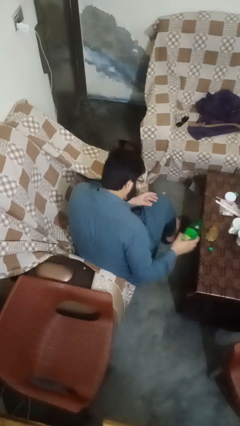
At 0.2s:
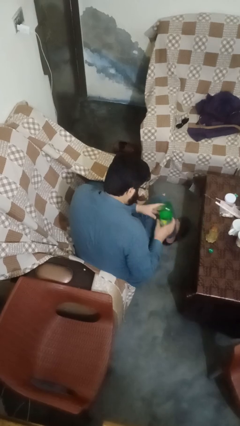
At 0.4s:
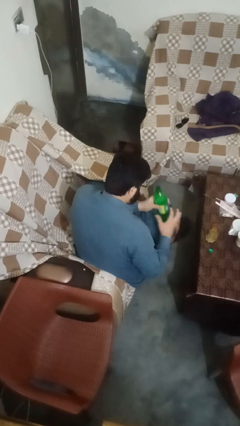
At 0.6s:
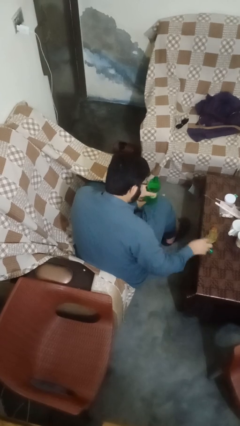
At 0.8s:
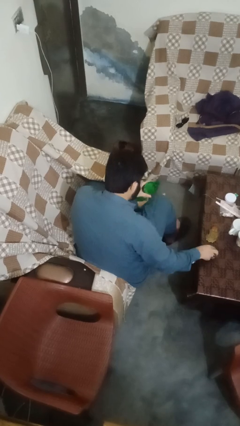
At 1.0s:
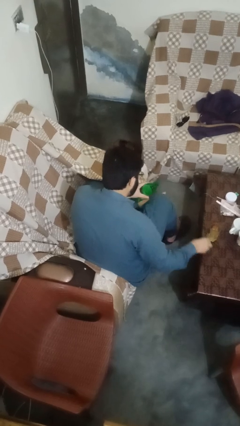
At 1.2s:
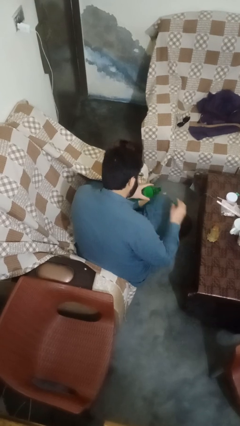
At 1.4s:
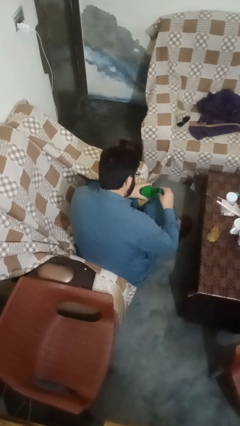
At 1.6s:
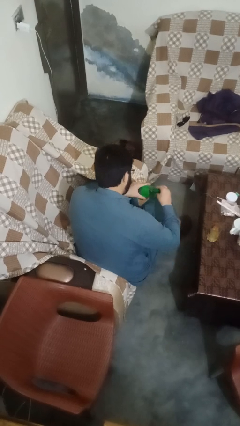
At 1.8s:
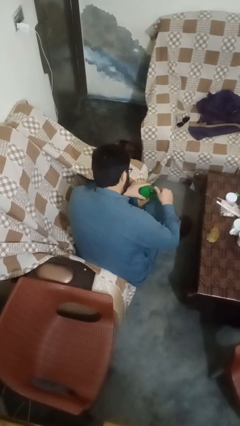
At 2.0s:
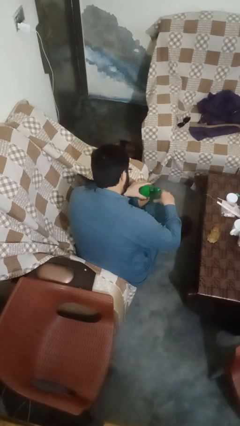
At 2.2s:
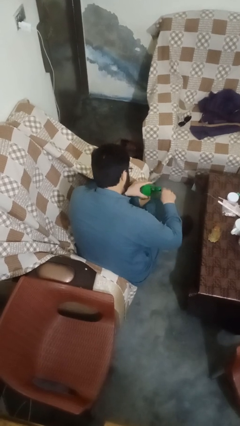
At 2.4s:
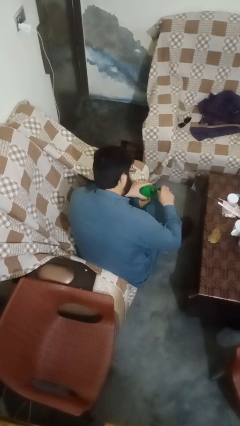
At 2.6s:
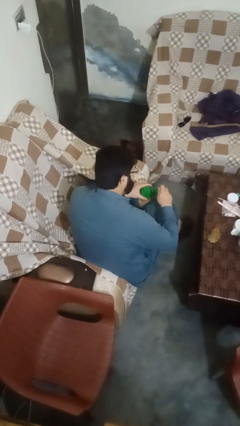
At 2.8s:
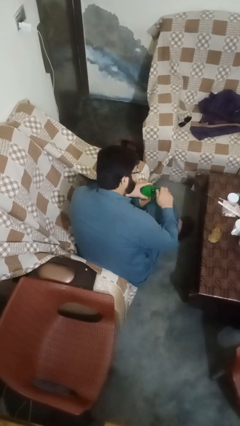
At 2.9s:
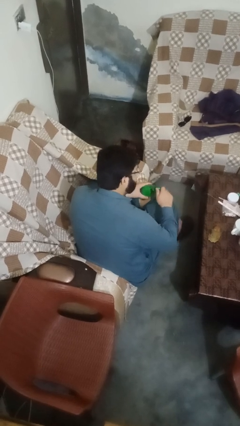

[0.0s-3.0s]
person screws lid to bottle

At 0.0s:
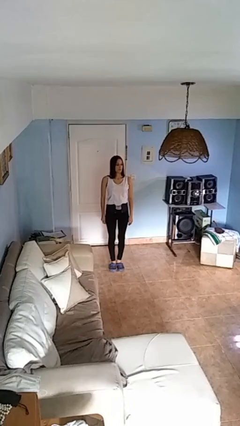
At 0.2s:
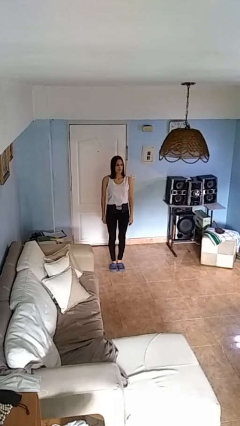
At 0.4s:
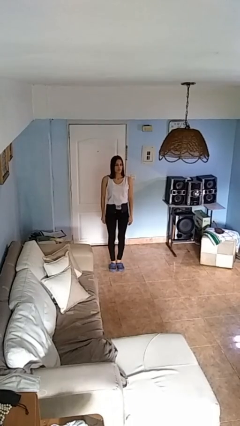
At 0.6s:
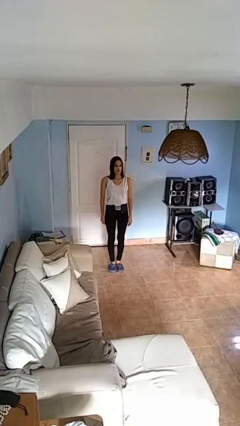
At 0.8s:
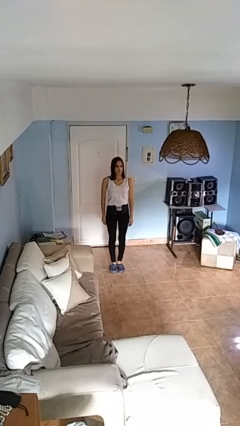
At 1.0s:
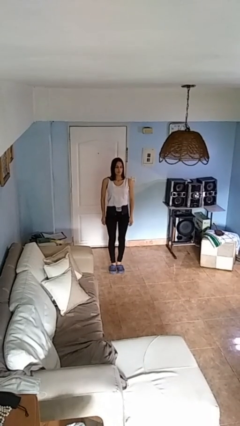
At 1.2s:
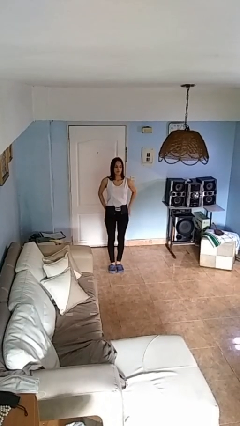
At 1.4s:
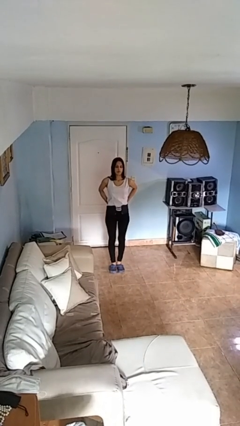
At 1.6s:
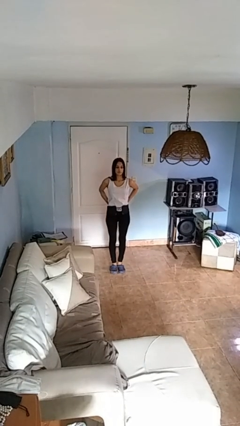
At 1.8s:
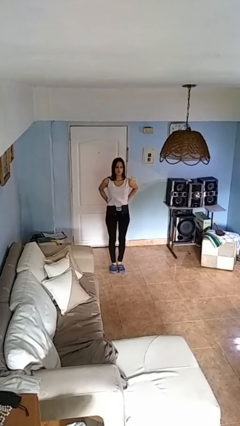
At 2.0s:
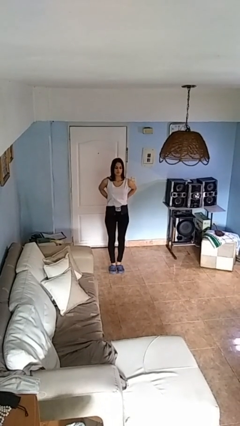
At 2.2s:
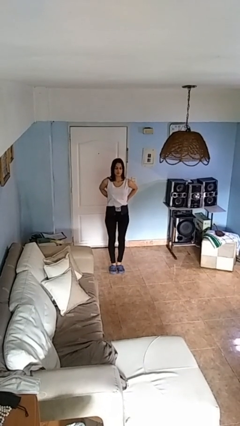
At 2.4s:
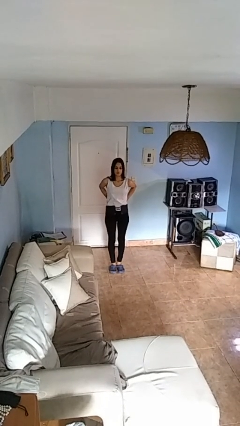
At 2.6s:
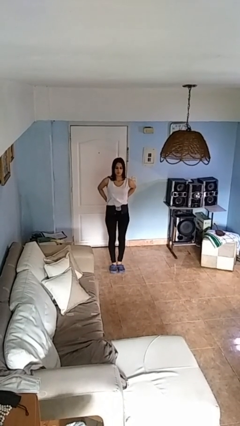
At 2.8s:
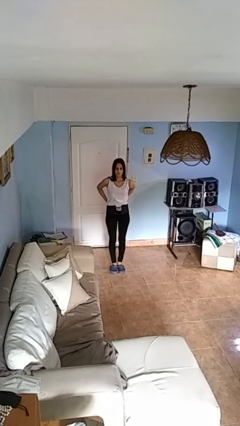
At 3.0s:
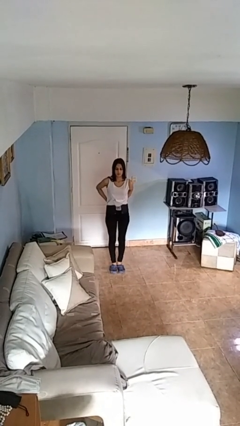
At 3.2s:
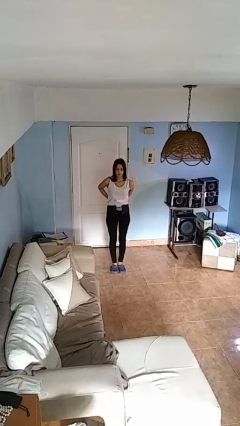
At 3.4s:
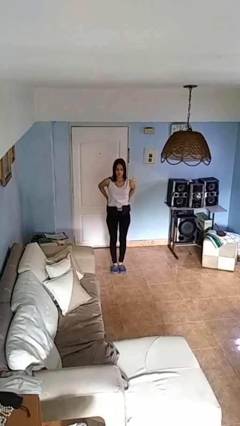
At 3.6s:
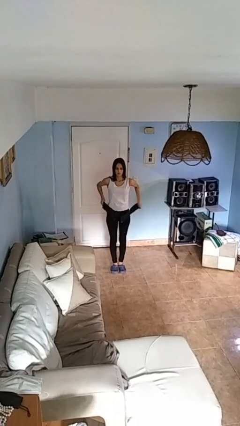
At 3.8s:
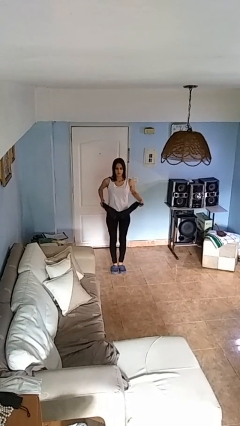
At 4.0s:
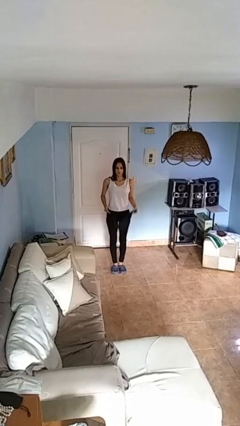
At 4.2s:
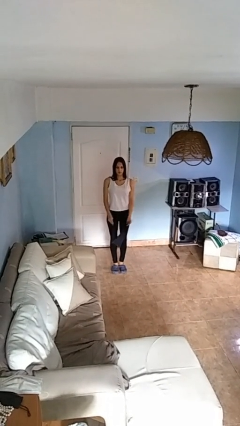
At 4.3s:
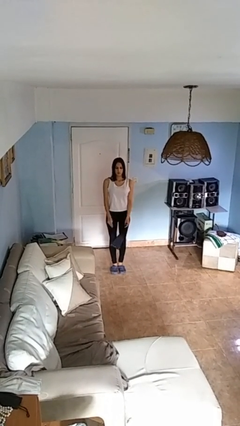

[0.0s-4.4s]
person takes off belt

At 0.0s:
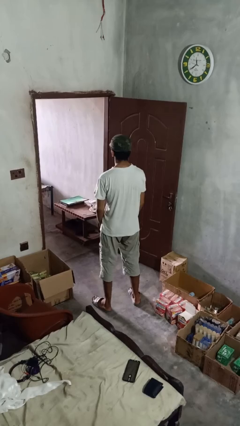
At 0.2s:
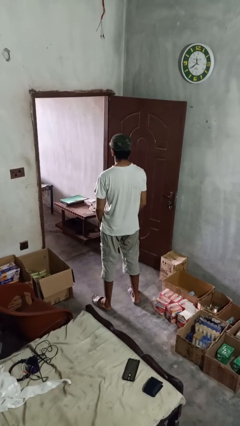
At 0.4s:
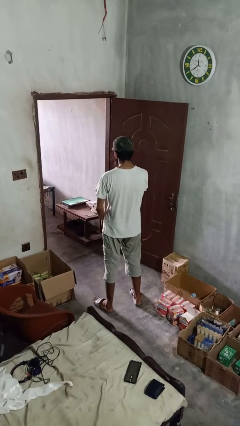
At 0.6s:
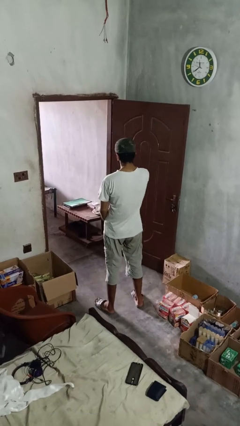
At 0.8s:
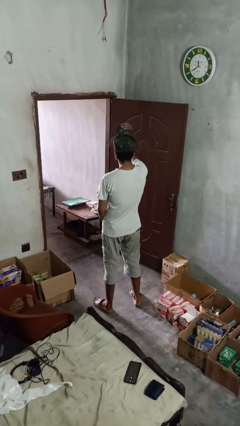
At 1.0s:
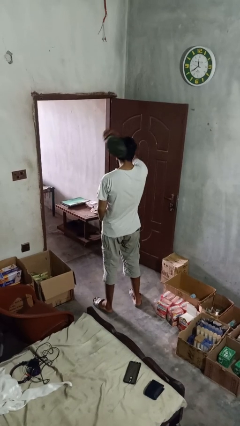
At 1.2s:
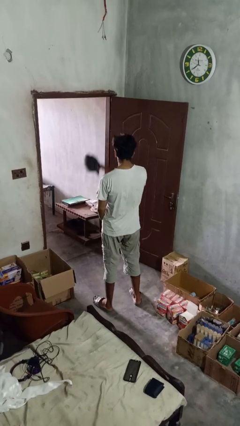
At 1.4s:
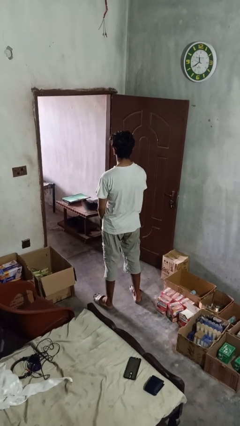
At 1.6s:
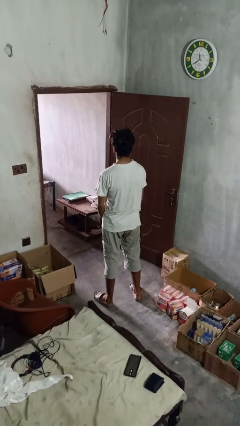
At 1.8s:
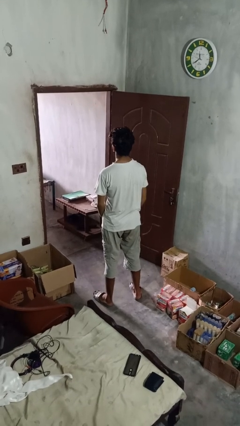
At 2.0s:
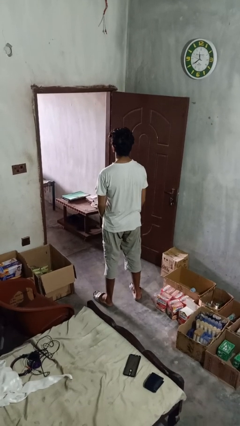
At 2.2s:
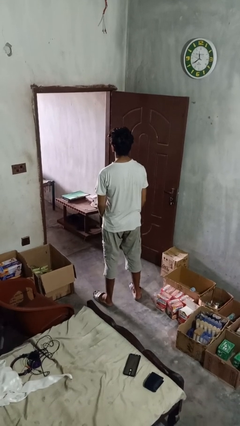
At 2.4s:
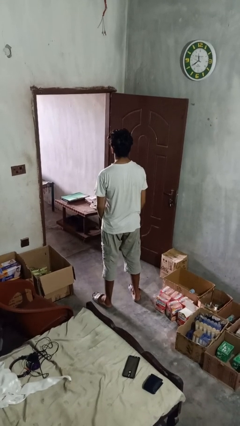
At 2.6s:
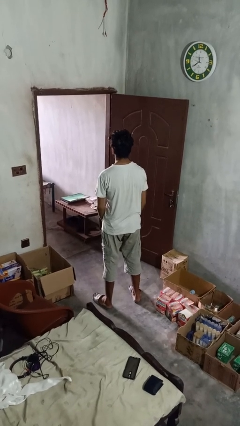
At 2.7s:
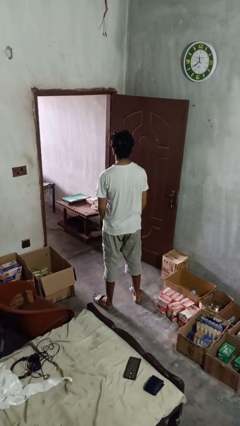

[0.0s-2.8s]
person takes off hat

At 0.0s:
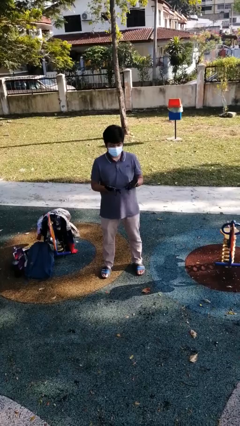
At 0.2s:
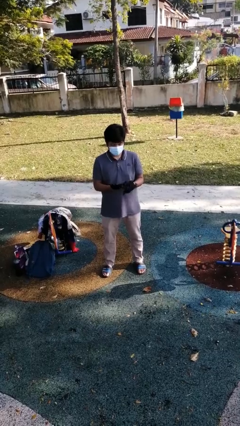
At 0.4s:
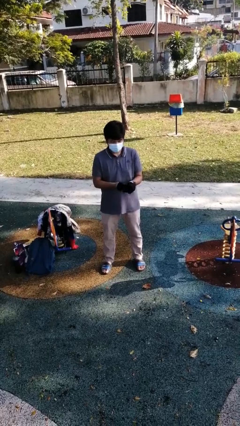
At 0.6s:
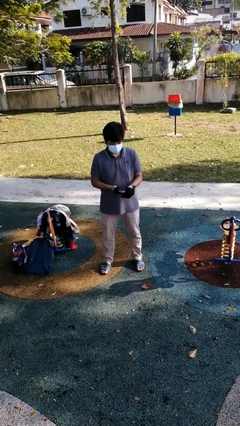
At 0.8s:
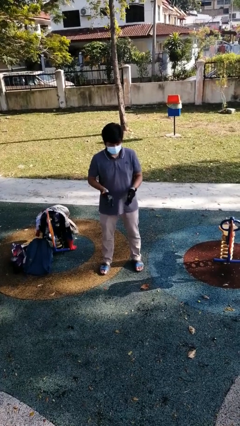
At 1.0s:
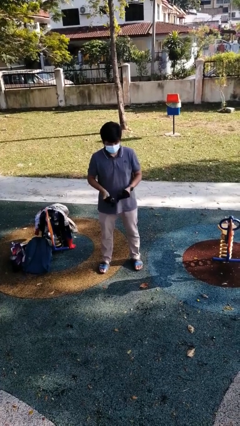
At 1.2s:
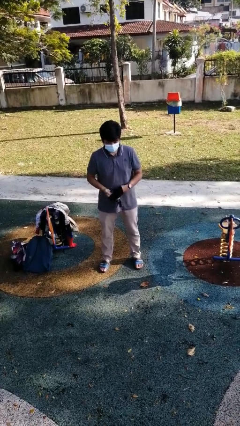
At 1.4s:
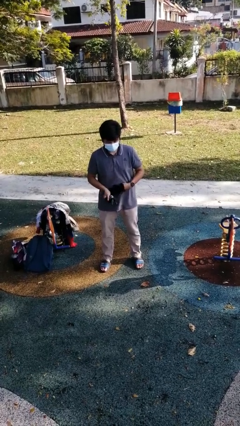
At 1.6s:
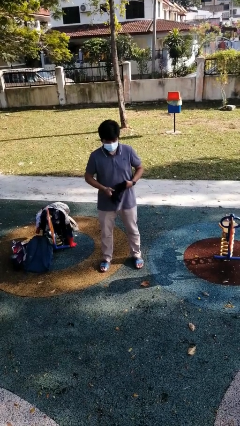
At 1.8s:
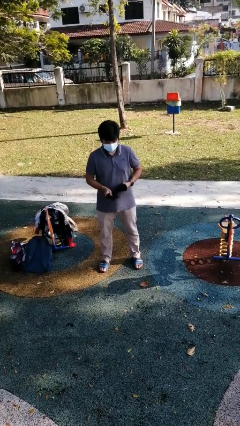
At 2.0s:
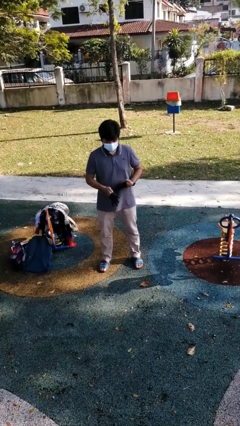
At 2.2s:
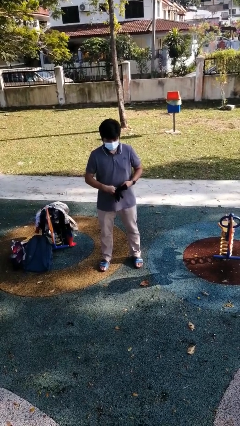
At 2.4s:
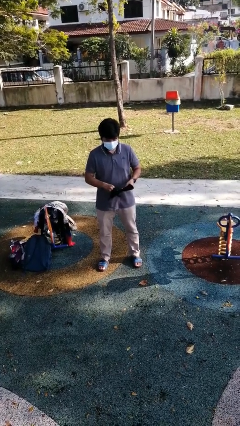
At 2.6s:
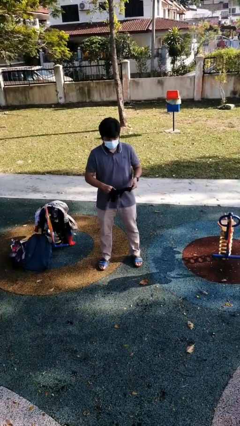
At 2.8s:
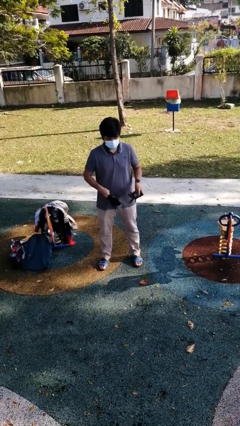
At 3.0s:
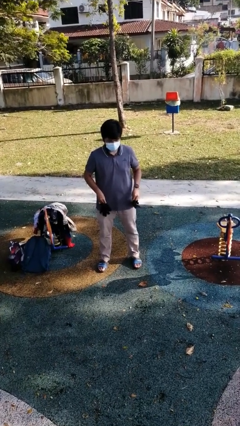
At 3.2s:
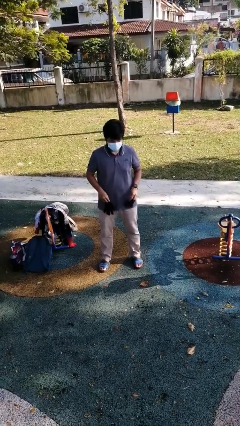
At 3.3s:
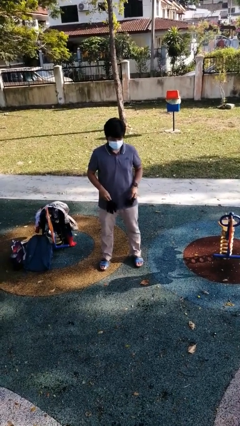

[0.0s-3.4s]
person takes off gloves

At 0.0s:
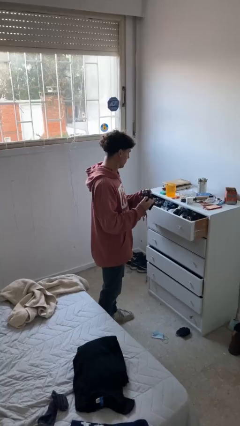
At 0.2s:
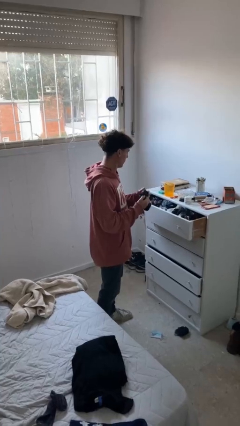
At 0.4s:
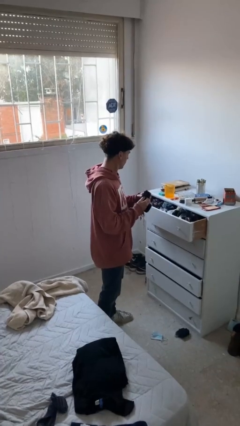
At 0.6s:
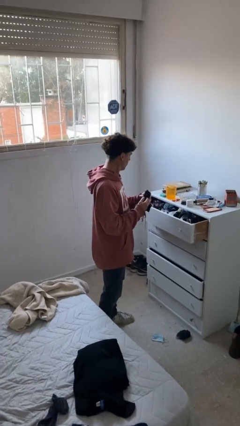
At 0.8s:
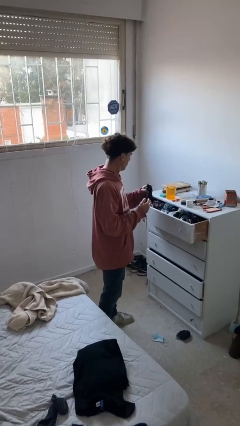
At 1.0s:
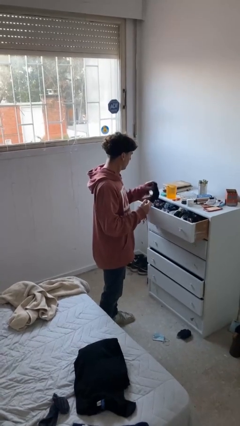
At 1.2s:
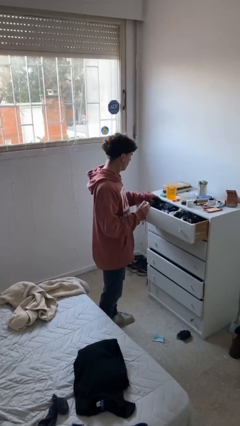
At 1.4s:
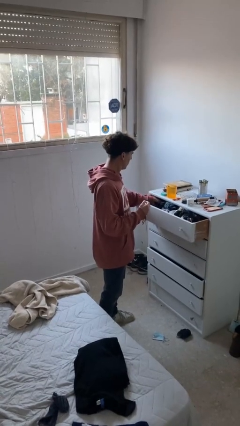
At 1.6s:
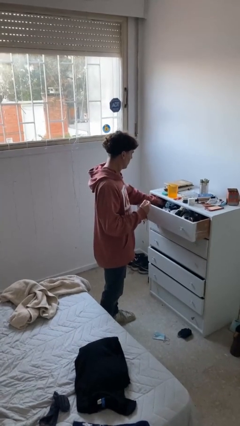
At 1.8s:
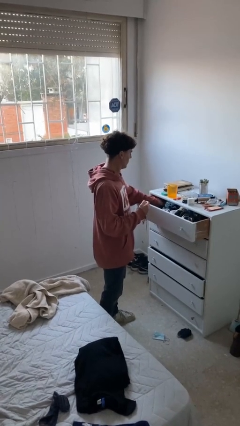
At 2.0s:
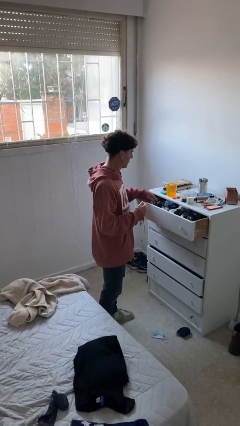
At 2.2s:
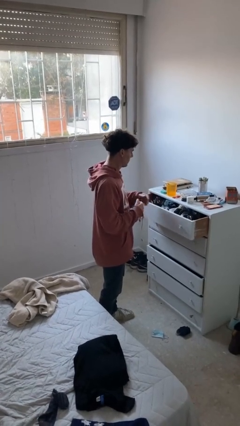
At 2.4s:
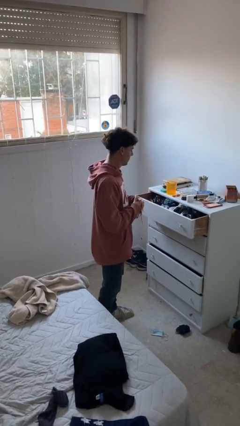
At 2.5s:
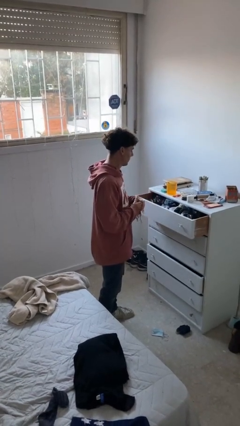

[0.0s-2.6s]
person puts clothes into dresser

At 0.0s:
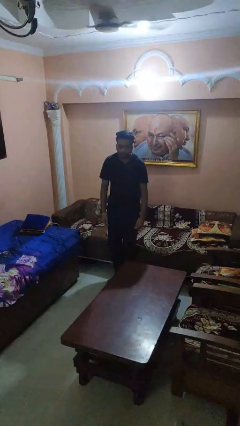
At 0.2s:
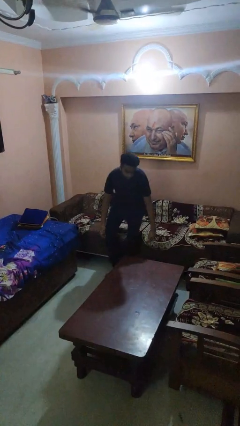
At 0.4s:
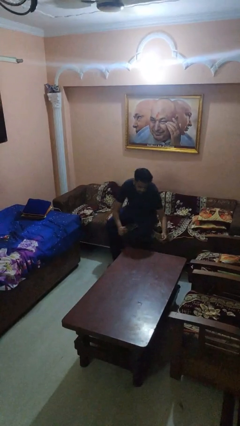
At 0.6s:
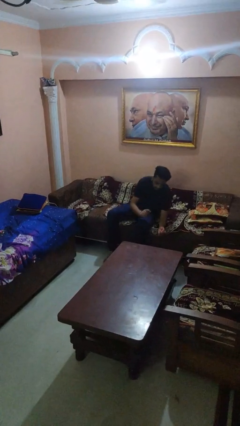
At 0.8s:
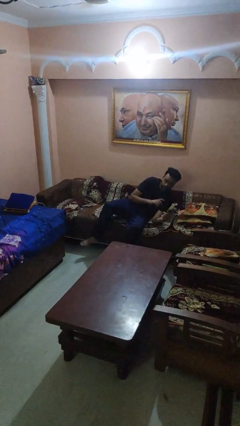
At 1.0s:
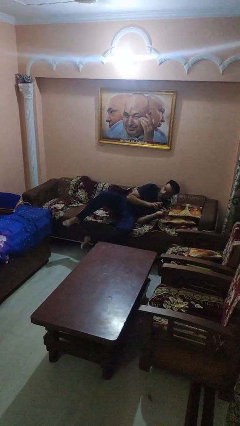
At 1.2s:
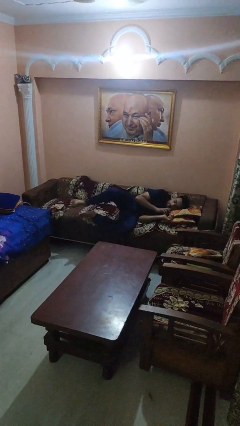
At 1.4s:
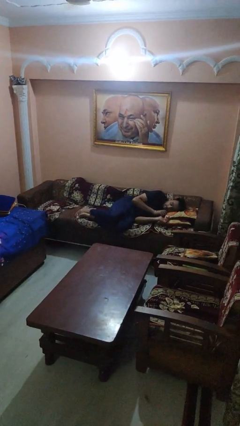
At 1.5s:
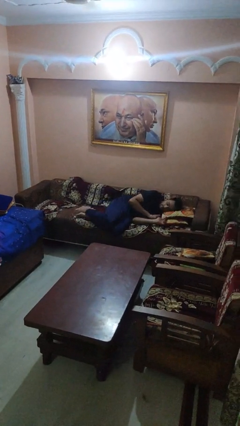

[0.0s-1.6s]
person lies down on couch
